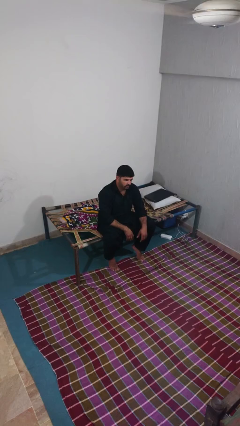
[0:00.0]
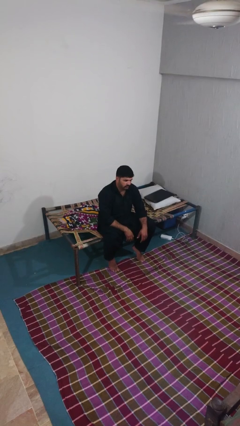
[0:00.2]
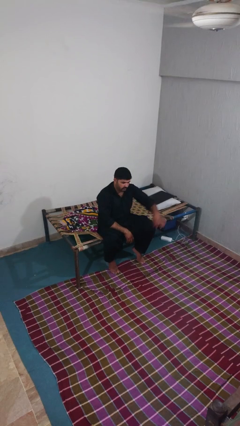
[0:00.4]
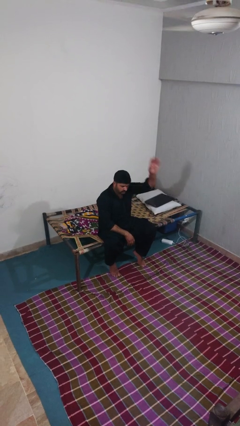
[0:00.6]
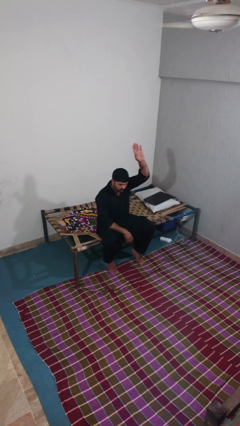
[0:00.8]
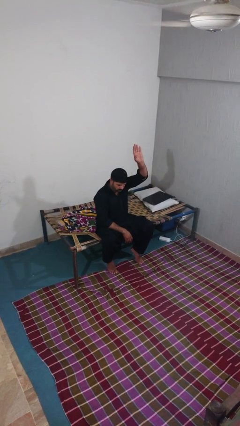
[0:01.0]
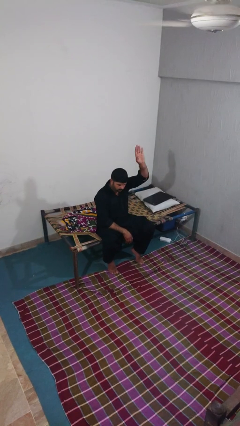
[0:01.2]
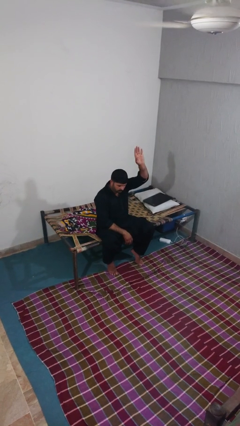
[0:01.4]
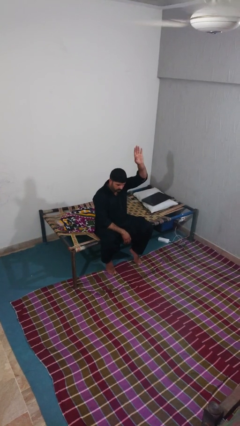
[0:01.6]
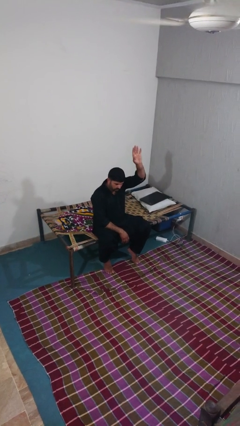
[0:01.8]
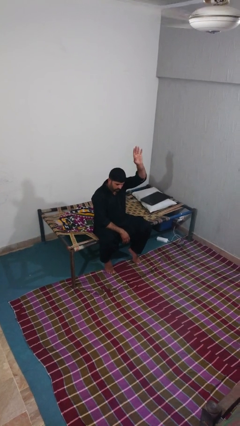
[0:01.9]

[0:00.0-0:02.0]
person gestures raise hand

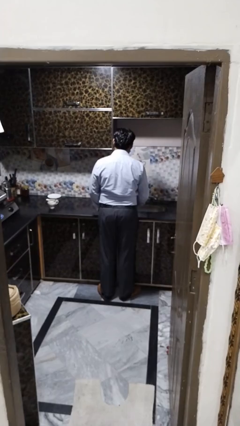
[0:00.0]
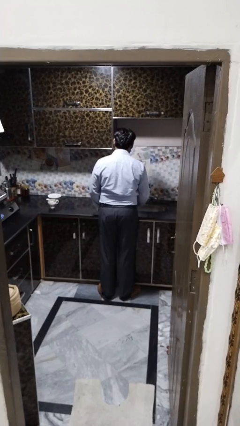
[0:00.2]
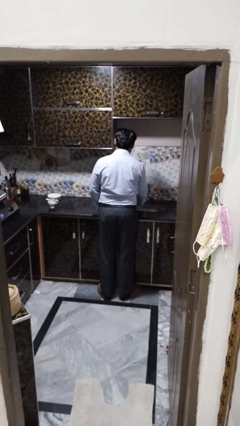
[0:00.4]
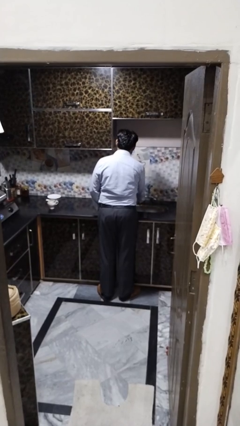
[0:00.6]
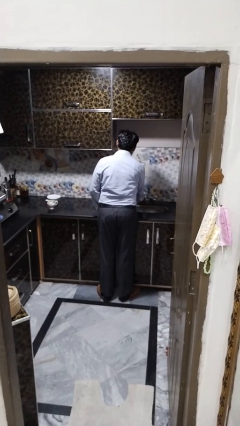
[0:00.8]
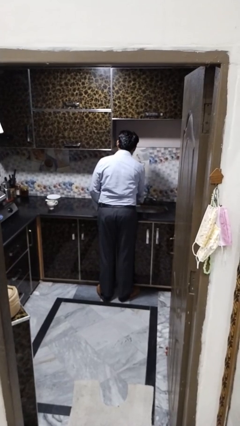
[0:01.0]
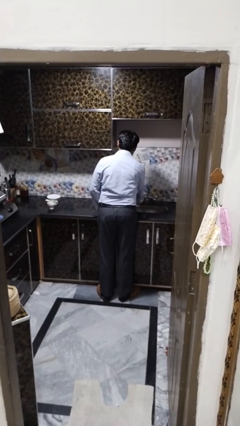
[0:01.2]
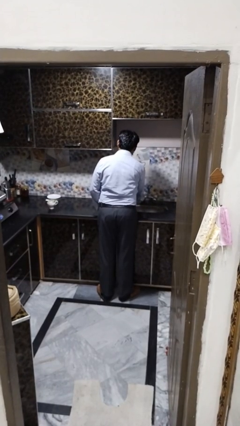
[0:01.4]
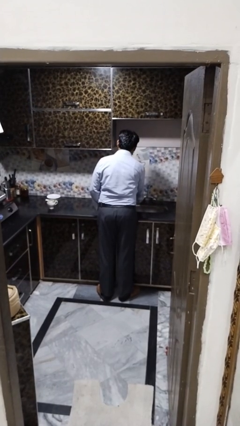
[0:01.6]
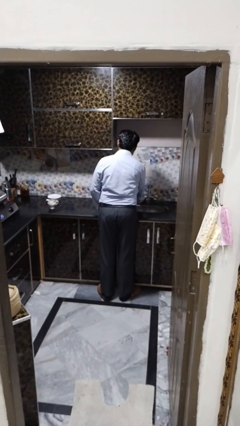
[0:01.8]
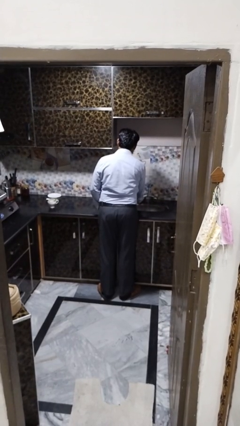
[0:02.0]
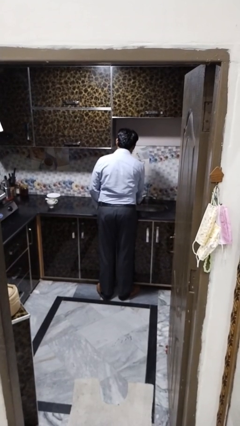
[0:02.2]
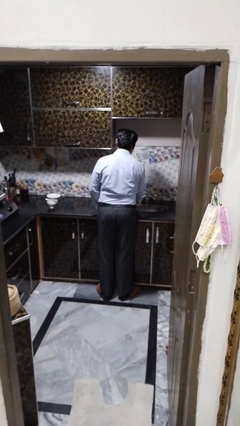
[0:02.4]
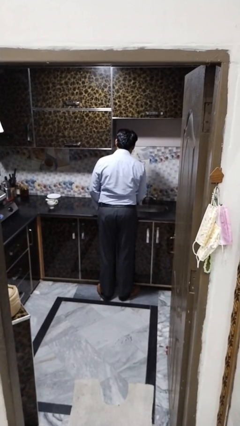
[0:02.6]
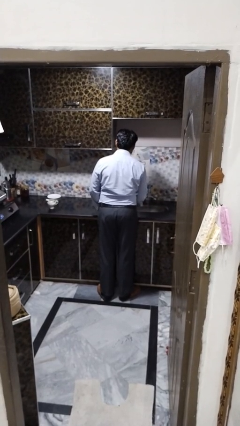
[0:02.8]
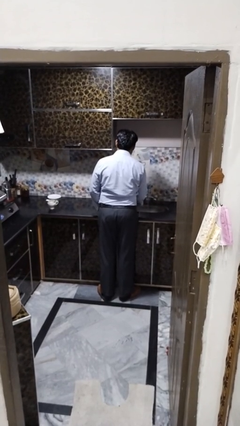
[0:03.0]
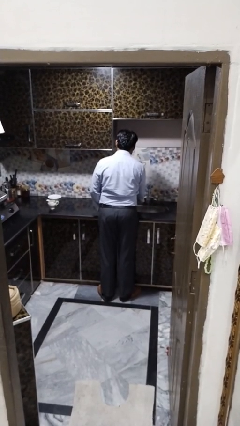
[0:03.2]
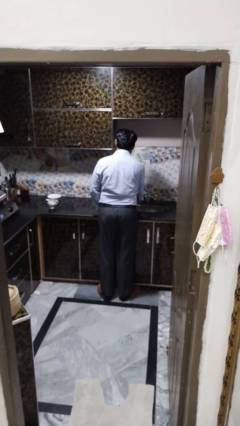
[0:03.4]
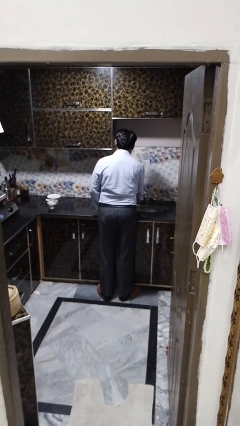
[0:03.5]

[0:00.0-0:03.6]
person turns on faucet

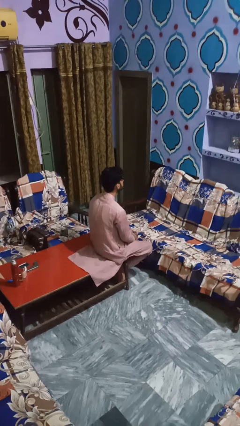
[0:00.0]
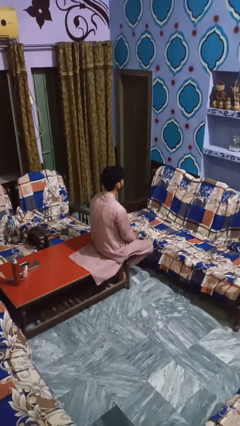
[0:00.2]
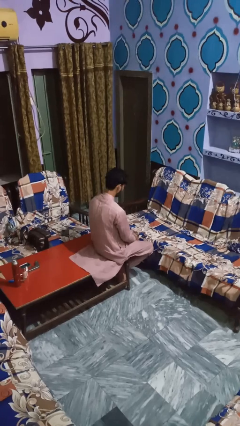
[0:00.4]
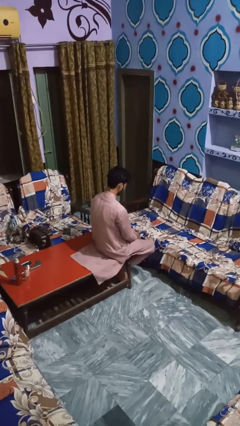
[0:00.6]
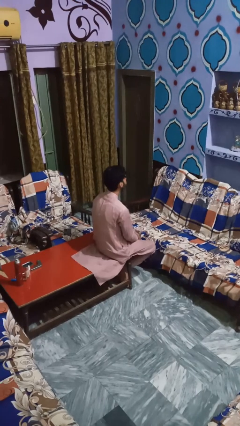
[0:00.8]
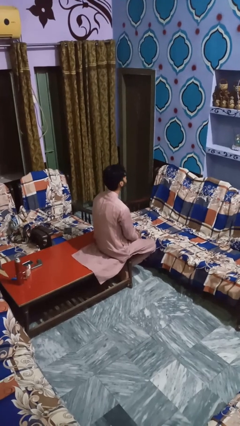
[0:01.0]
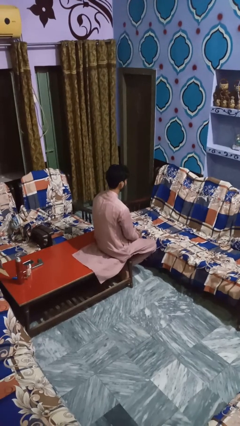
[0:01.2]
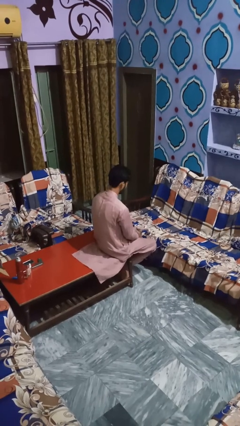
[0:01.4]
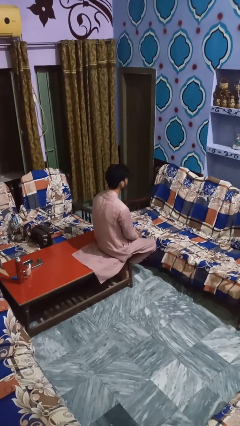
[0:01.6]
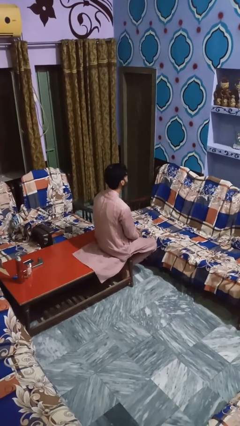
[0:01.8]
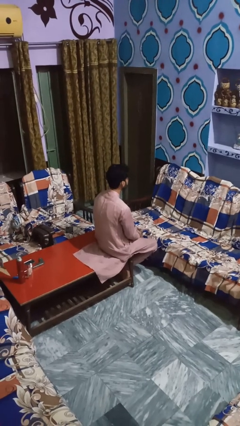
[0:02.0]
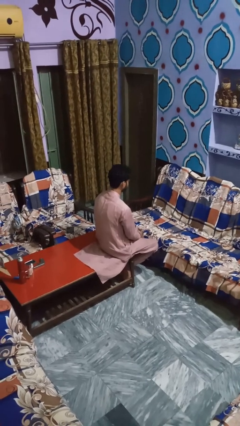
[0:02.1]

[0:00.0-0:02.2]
person nods head

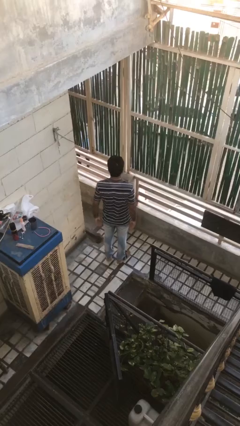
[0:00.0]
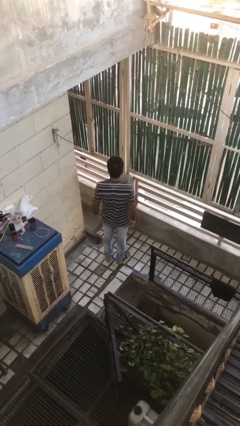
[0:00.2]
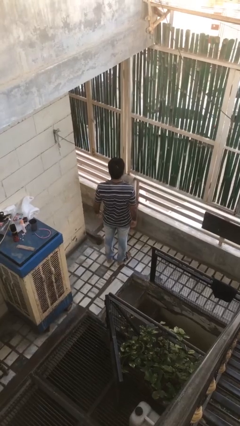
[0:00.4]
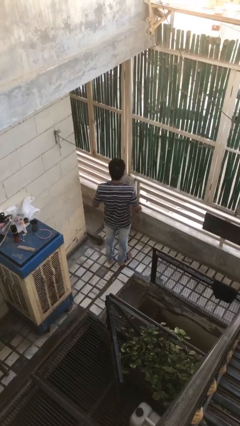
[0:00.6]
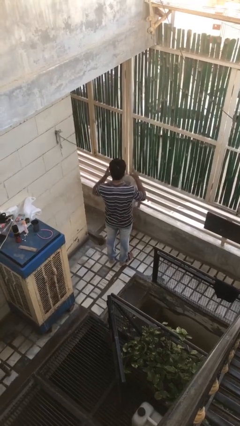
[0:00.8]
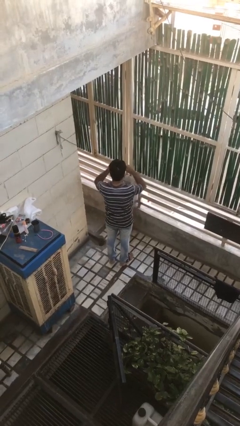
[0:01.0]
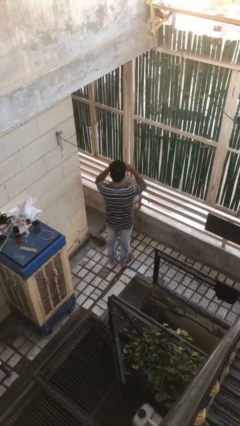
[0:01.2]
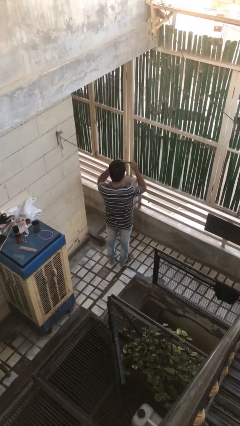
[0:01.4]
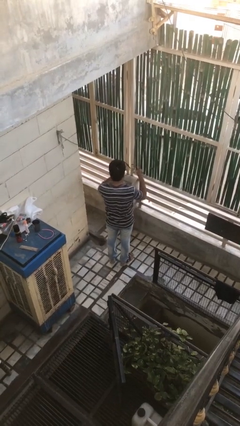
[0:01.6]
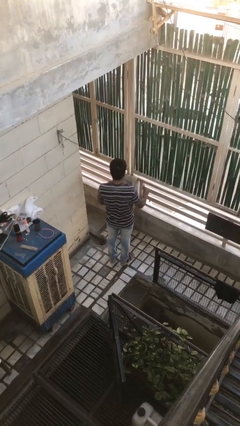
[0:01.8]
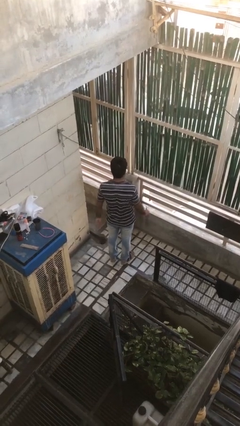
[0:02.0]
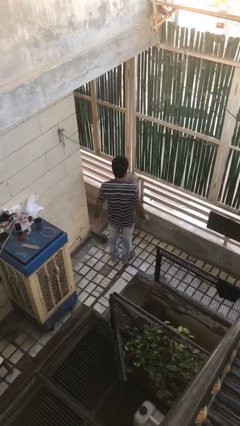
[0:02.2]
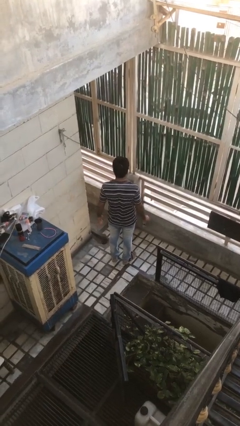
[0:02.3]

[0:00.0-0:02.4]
person takes off sunglasses

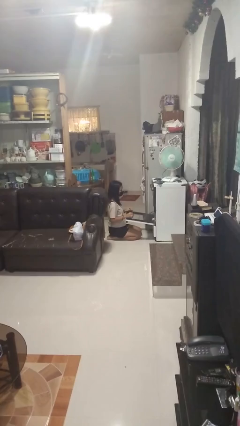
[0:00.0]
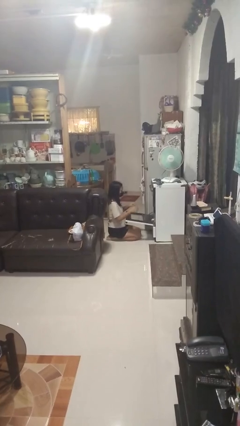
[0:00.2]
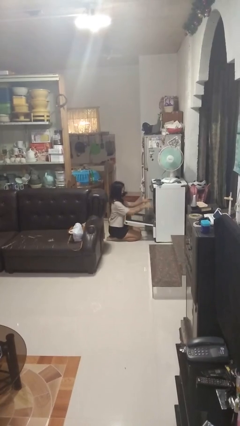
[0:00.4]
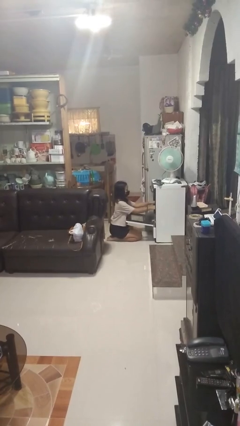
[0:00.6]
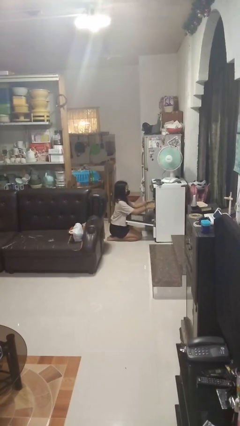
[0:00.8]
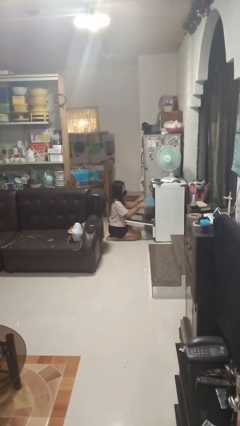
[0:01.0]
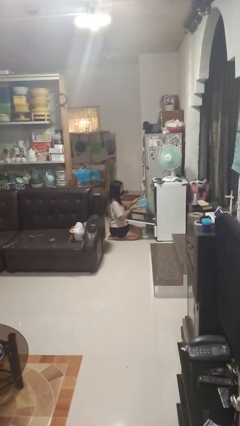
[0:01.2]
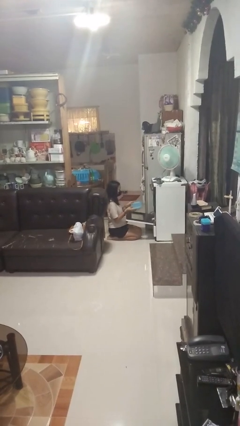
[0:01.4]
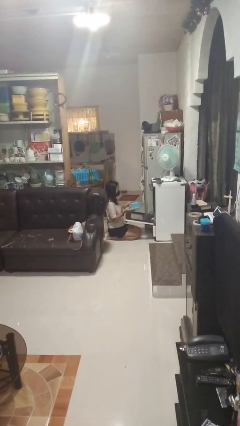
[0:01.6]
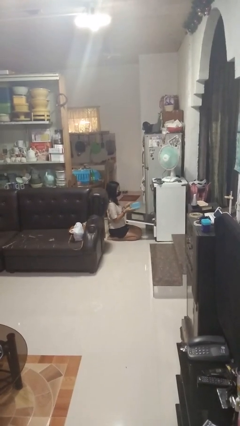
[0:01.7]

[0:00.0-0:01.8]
person takes object from oven

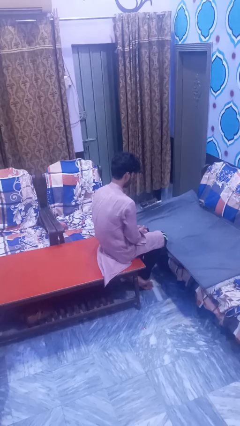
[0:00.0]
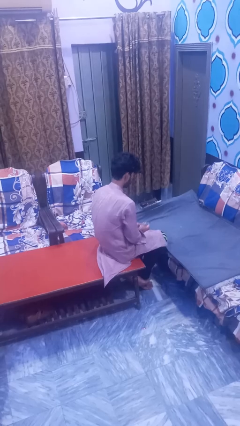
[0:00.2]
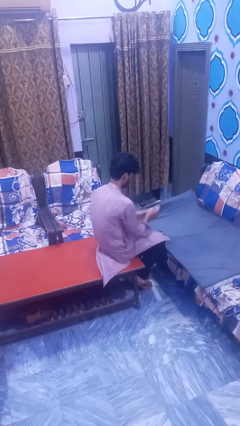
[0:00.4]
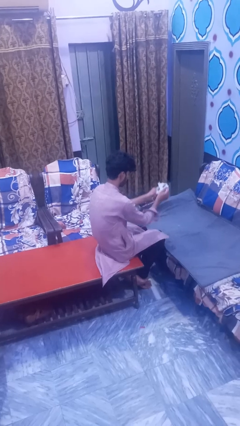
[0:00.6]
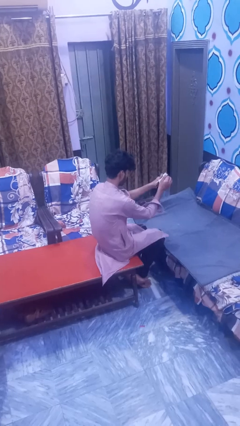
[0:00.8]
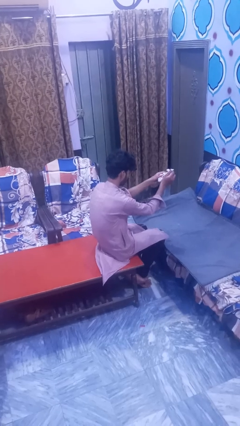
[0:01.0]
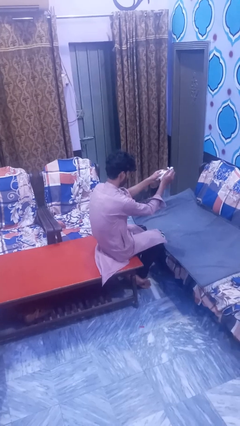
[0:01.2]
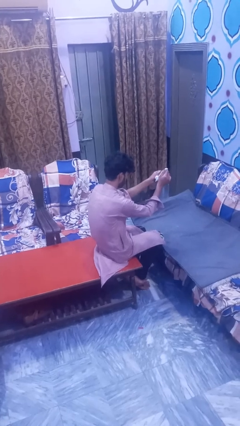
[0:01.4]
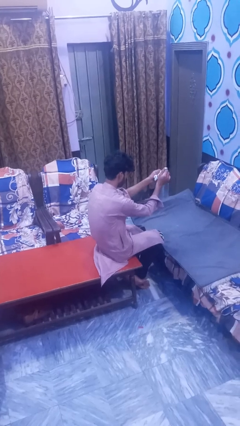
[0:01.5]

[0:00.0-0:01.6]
person crumples paper

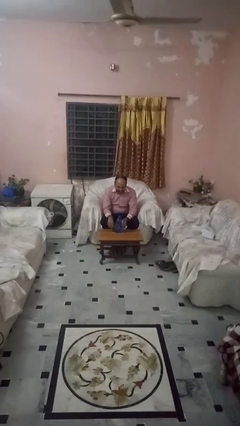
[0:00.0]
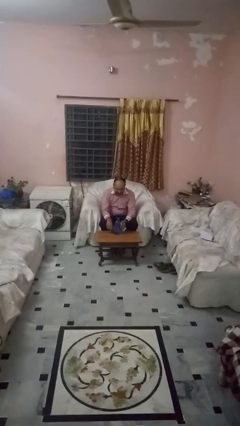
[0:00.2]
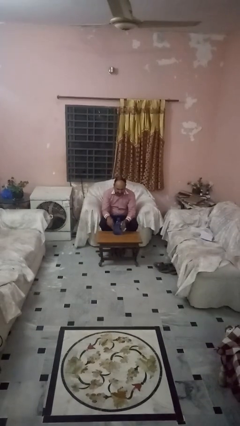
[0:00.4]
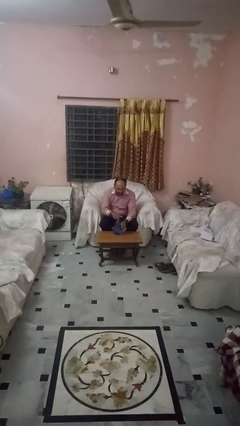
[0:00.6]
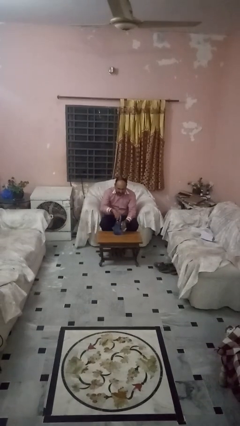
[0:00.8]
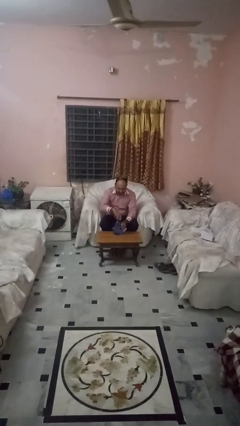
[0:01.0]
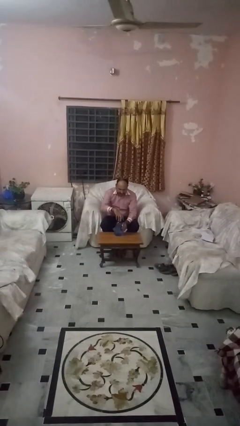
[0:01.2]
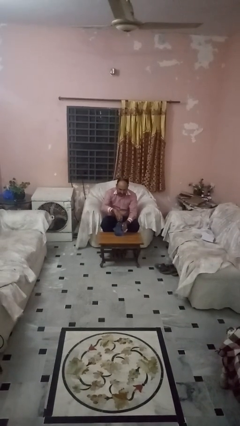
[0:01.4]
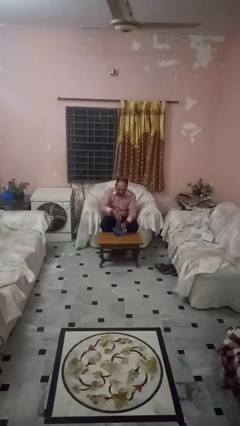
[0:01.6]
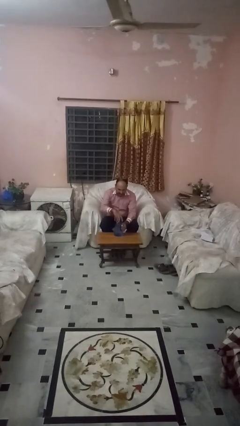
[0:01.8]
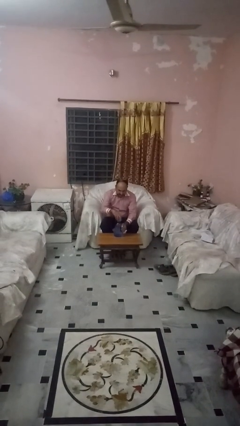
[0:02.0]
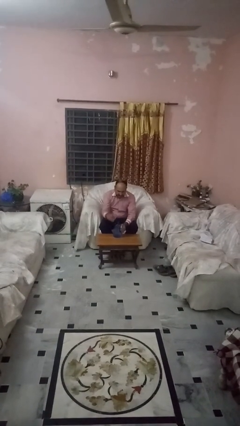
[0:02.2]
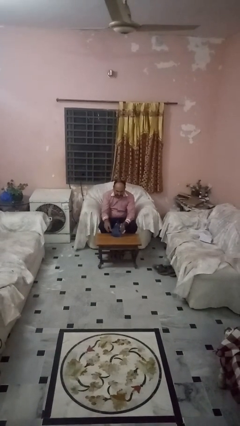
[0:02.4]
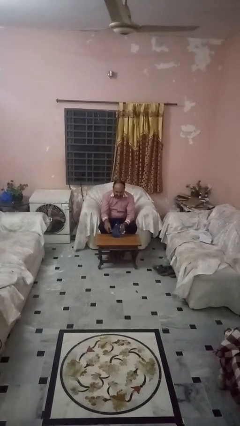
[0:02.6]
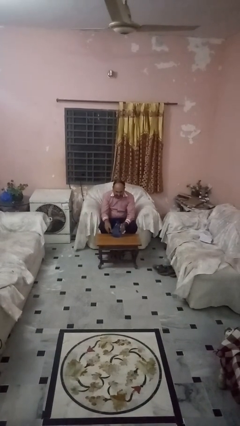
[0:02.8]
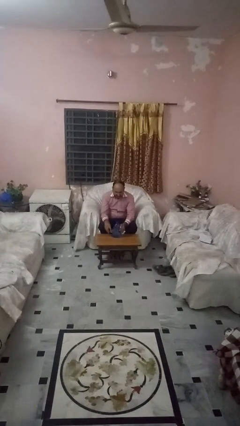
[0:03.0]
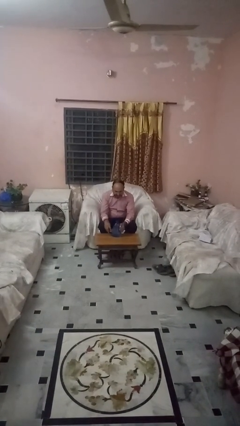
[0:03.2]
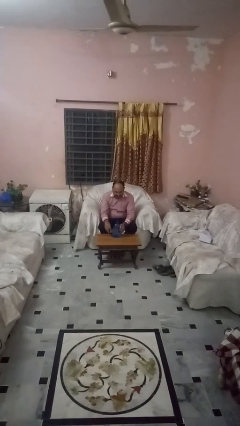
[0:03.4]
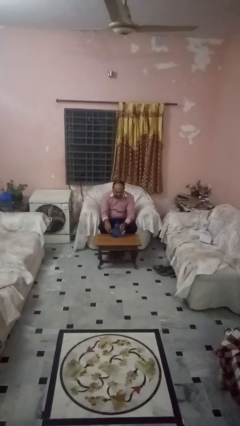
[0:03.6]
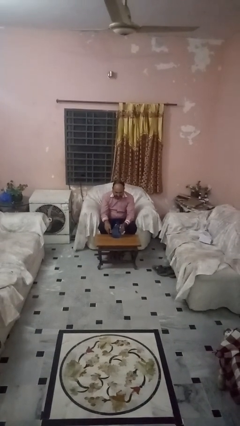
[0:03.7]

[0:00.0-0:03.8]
person unscrews lid from bottle
